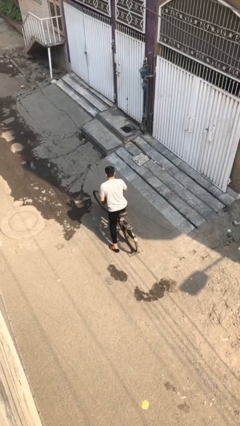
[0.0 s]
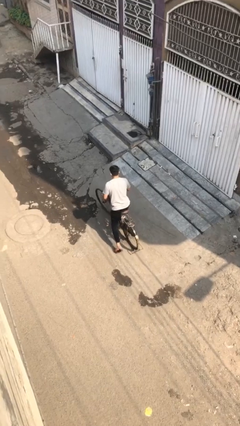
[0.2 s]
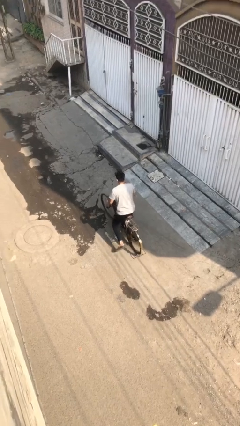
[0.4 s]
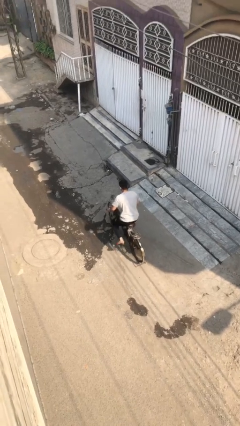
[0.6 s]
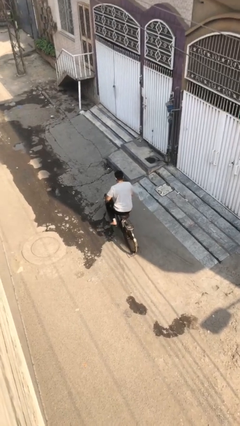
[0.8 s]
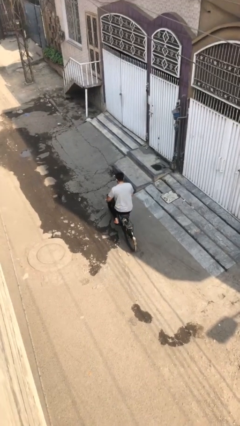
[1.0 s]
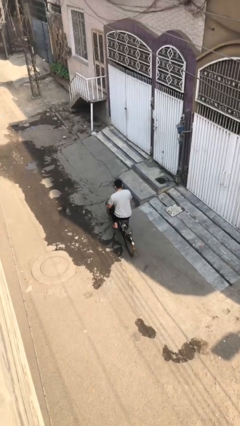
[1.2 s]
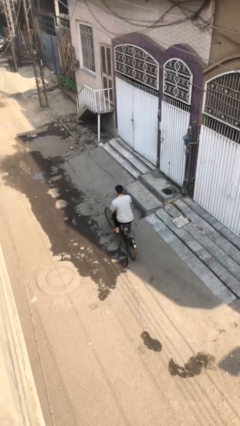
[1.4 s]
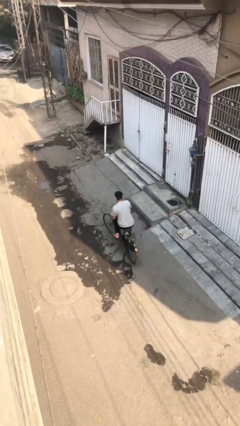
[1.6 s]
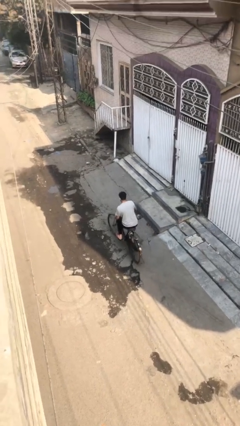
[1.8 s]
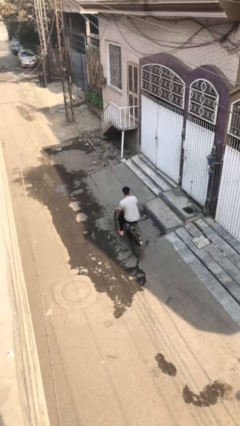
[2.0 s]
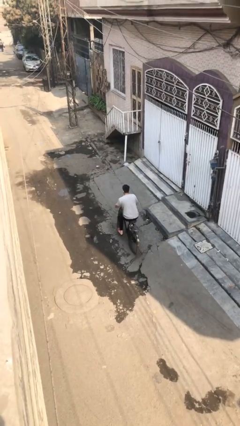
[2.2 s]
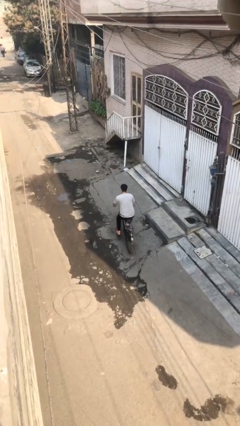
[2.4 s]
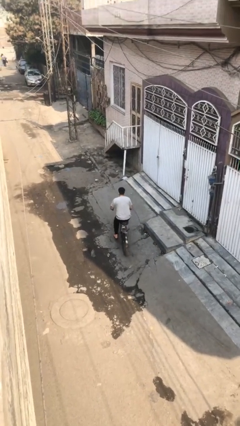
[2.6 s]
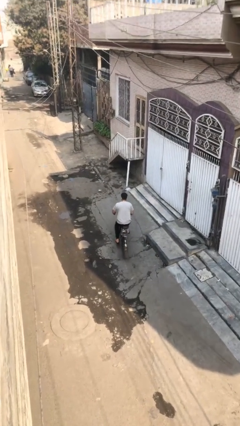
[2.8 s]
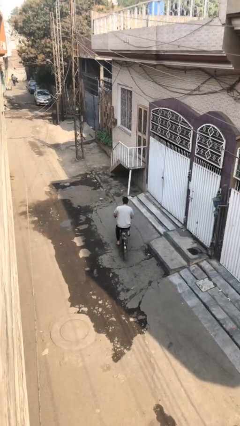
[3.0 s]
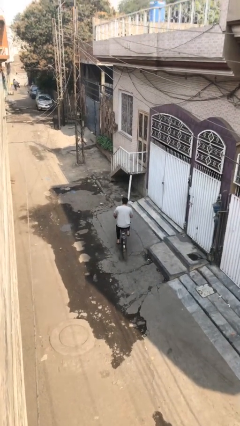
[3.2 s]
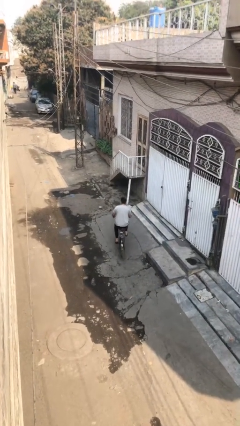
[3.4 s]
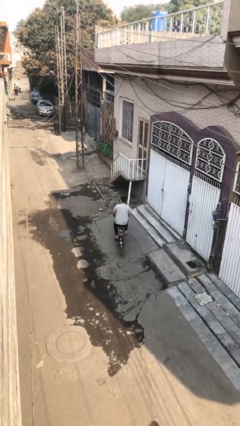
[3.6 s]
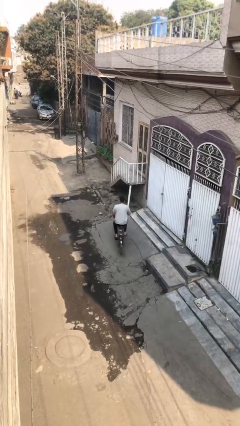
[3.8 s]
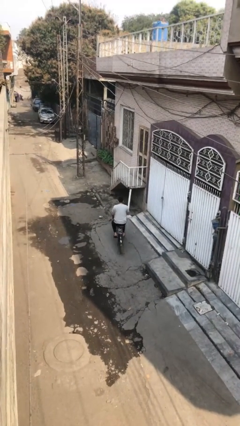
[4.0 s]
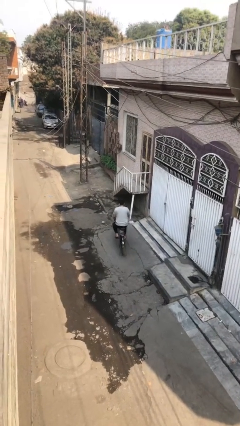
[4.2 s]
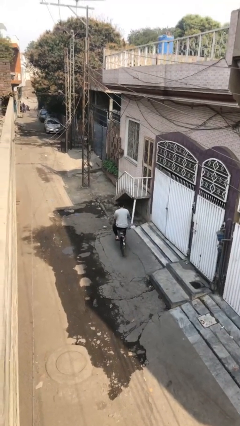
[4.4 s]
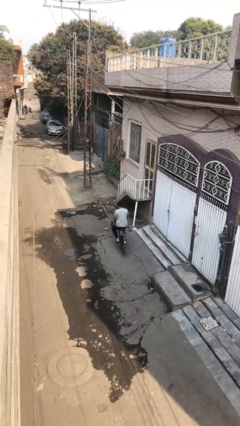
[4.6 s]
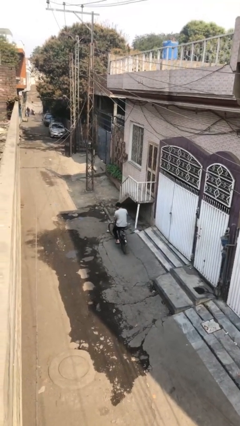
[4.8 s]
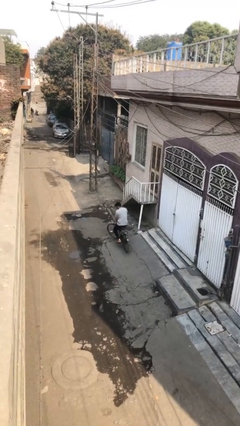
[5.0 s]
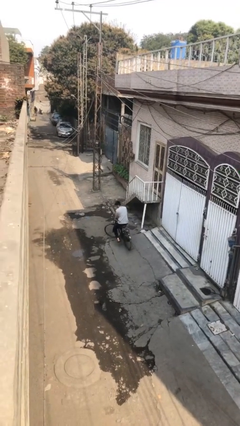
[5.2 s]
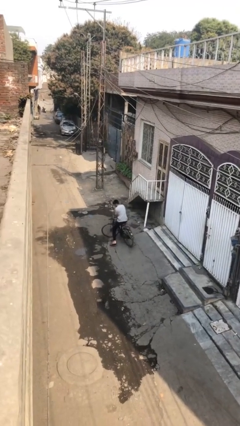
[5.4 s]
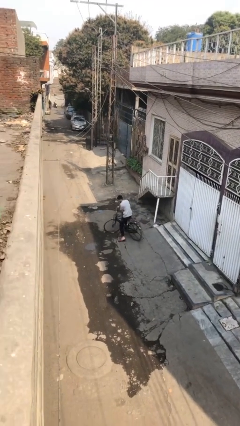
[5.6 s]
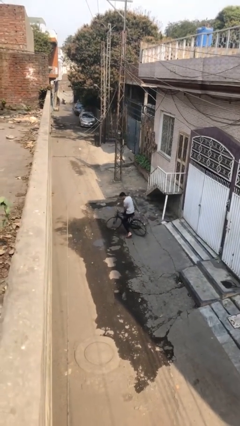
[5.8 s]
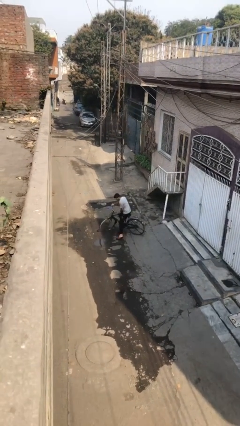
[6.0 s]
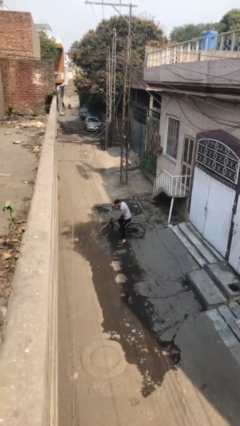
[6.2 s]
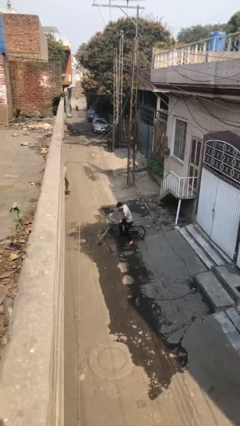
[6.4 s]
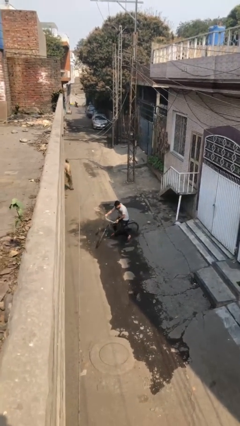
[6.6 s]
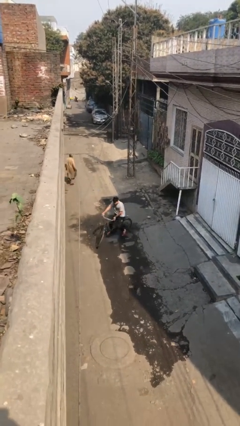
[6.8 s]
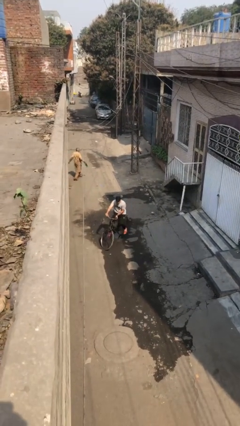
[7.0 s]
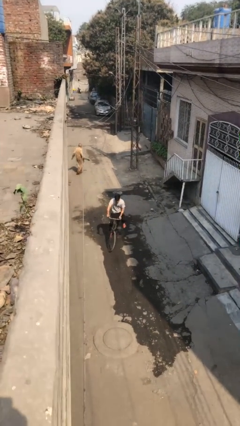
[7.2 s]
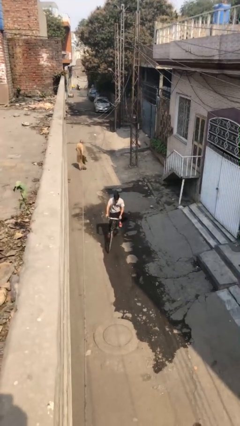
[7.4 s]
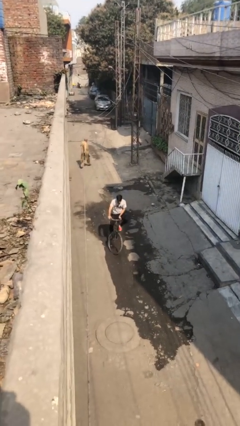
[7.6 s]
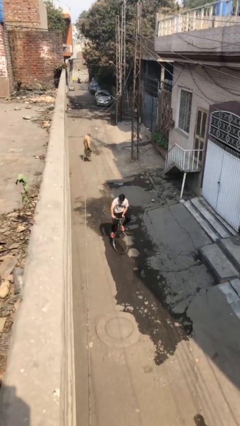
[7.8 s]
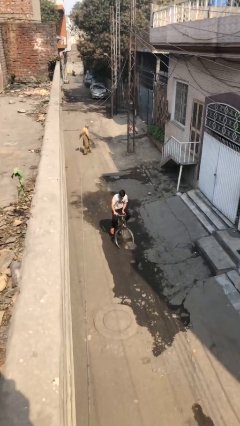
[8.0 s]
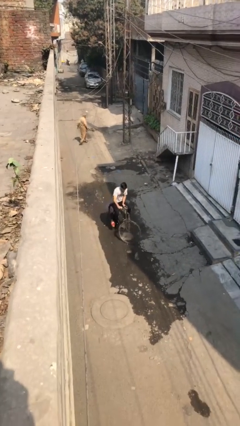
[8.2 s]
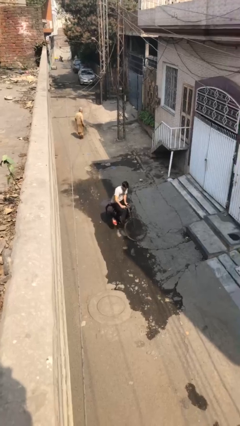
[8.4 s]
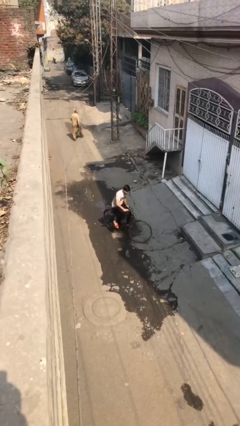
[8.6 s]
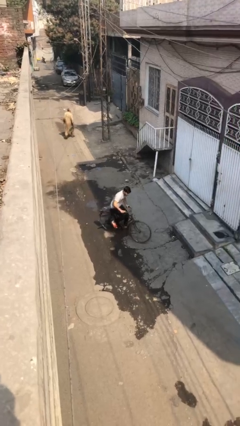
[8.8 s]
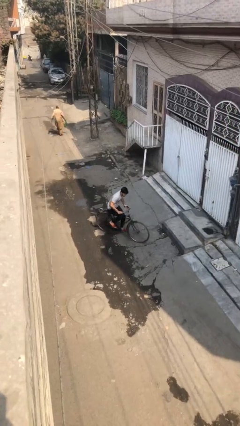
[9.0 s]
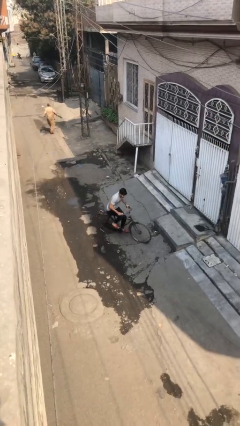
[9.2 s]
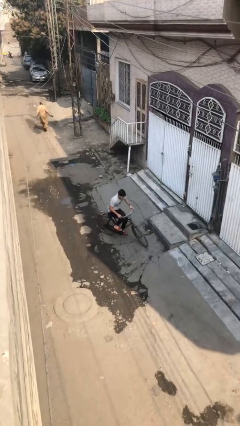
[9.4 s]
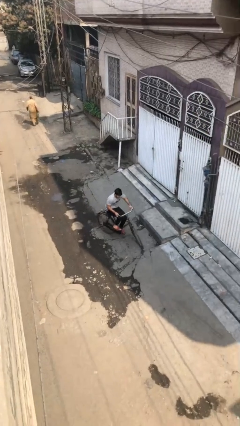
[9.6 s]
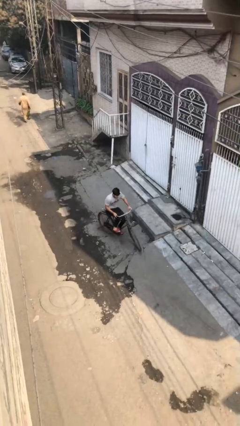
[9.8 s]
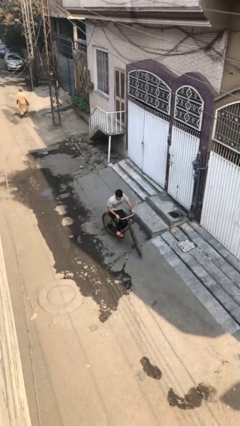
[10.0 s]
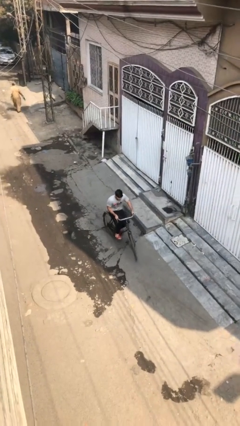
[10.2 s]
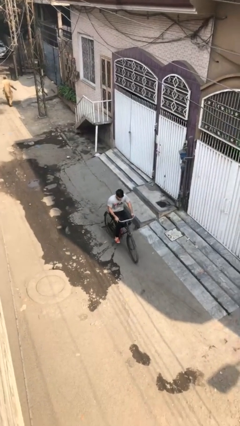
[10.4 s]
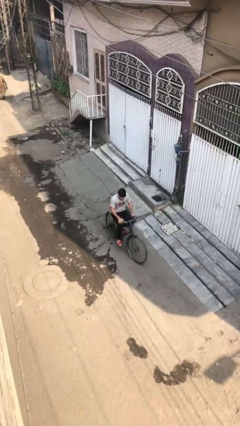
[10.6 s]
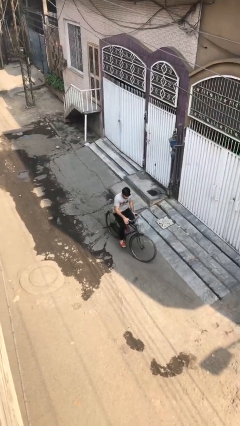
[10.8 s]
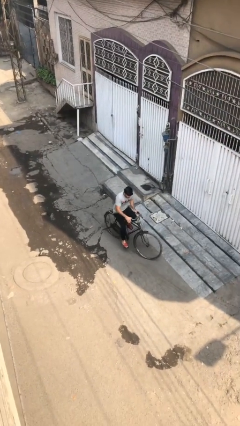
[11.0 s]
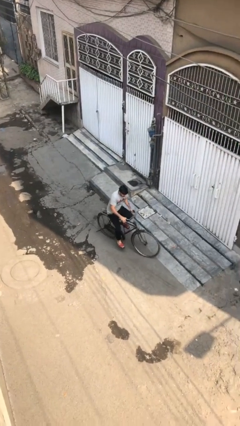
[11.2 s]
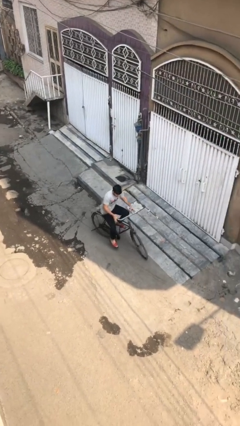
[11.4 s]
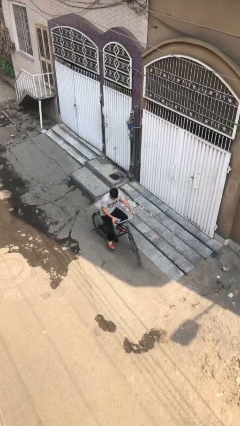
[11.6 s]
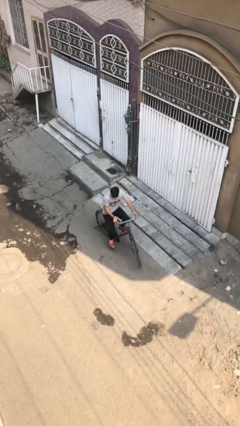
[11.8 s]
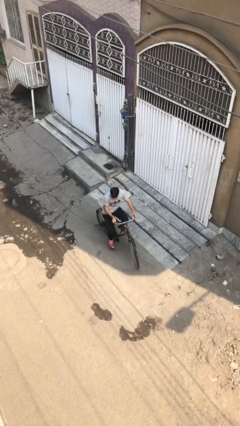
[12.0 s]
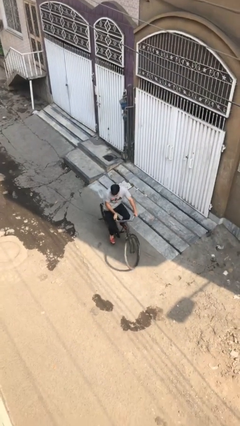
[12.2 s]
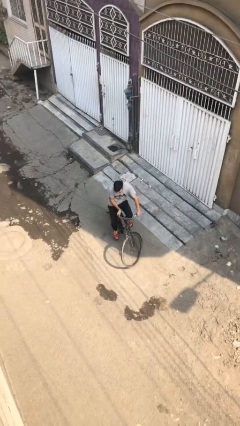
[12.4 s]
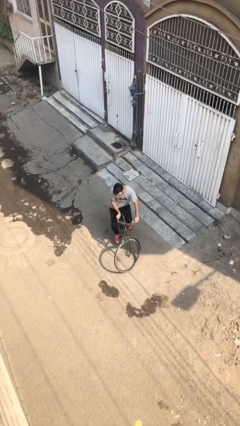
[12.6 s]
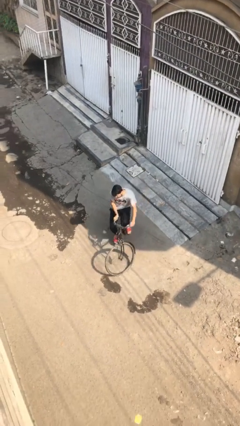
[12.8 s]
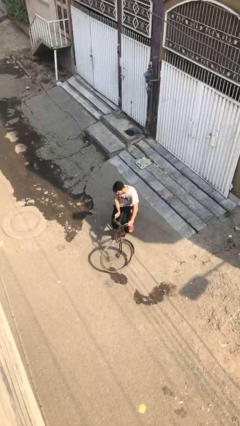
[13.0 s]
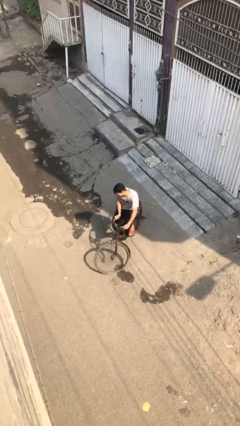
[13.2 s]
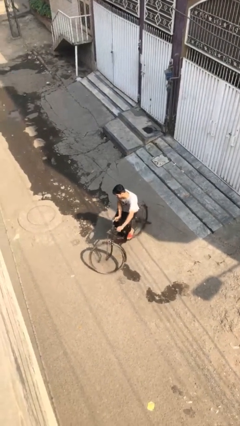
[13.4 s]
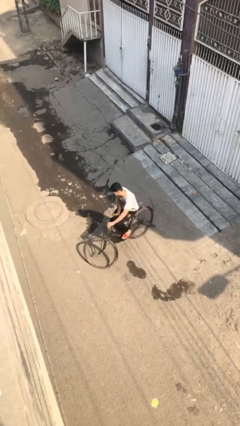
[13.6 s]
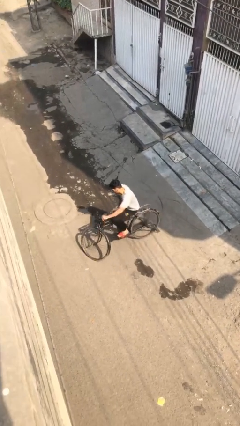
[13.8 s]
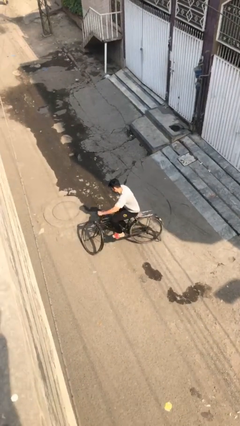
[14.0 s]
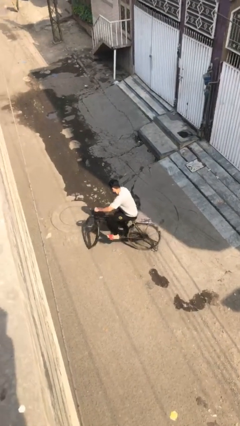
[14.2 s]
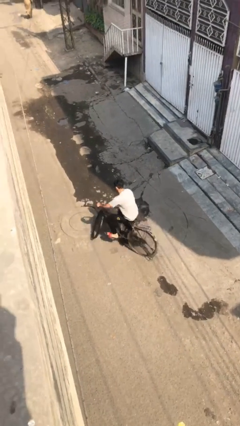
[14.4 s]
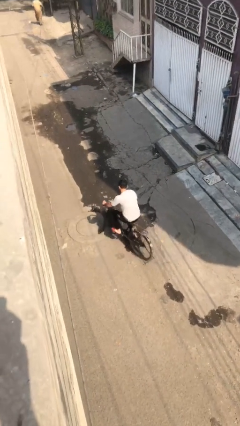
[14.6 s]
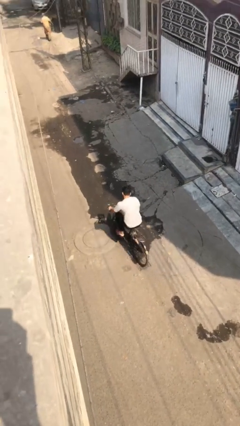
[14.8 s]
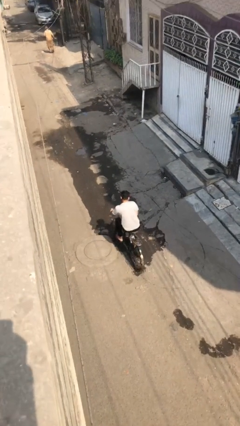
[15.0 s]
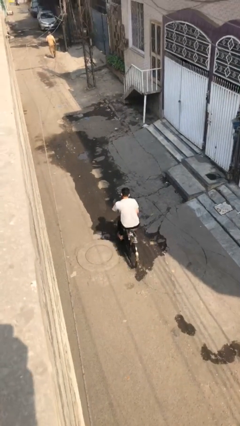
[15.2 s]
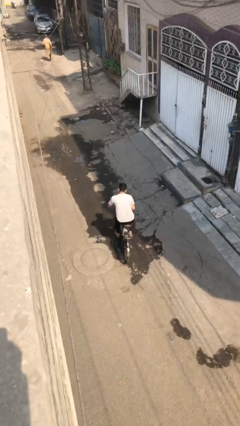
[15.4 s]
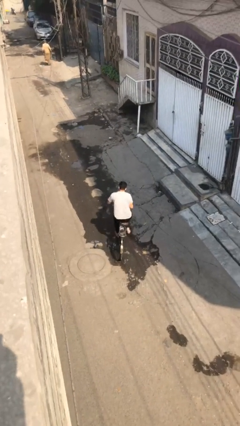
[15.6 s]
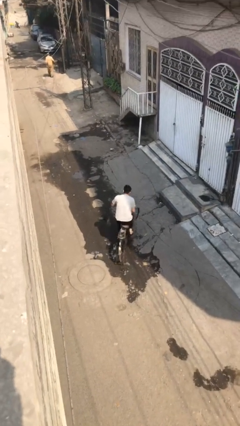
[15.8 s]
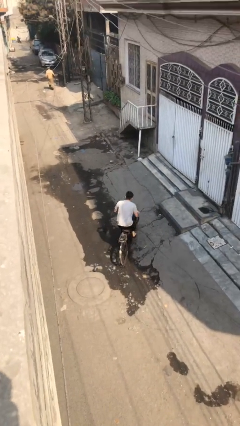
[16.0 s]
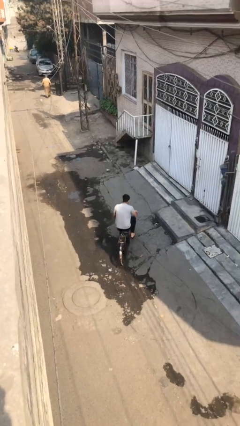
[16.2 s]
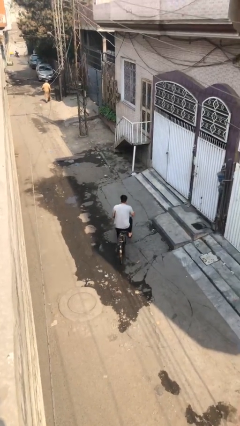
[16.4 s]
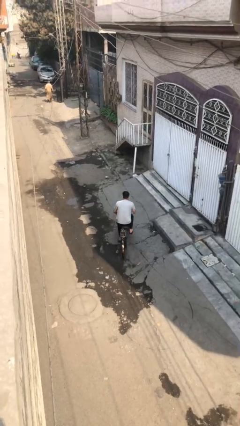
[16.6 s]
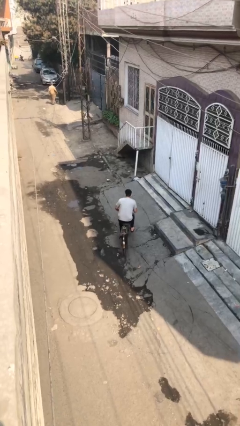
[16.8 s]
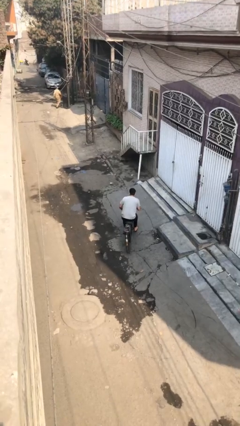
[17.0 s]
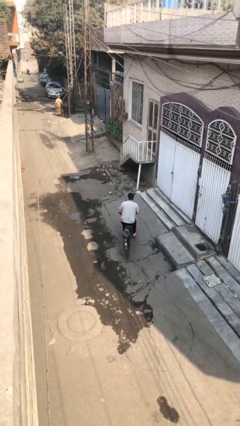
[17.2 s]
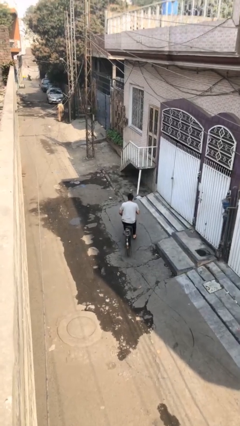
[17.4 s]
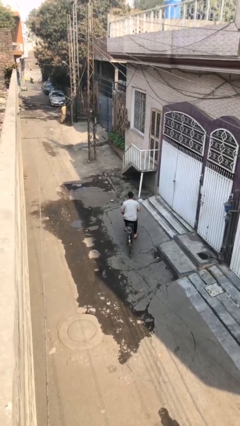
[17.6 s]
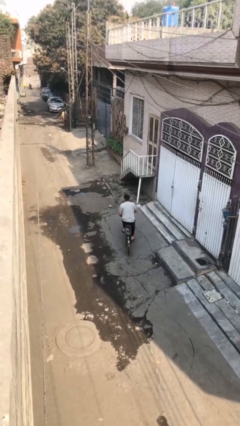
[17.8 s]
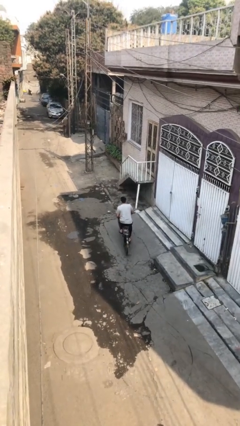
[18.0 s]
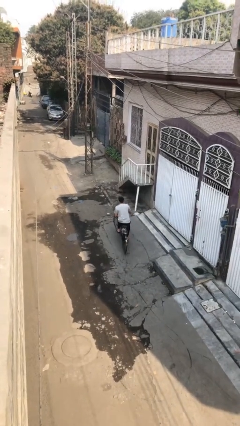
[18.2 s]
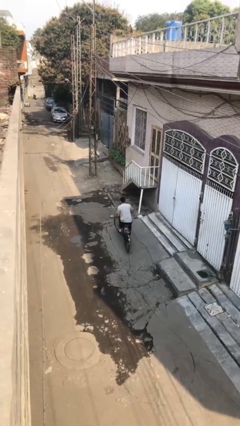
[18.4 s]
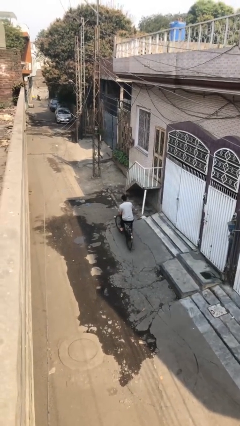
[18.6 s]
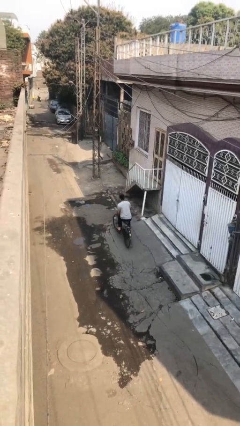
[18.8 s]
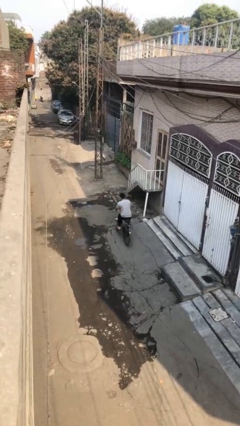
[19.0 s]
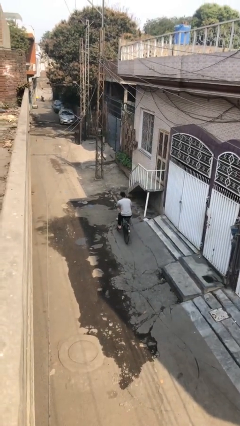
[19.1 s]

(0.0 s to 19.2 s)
person rides bicycle
